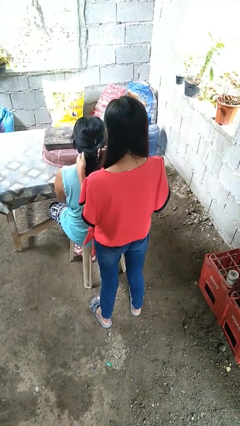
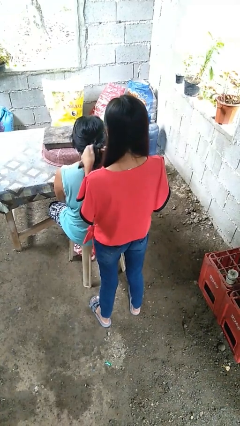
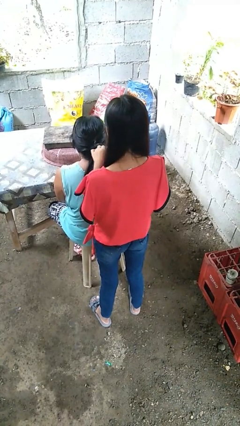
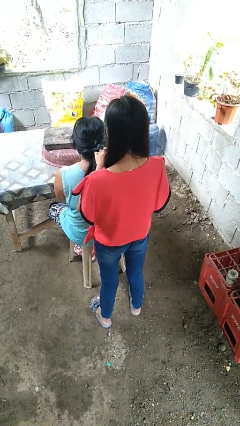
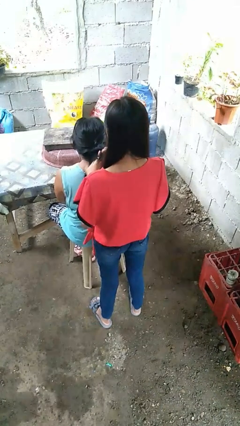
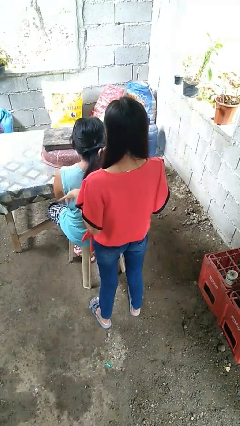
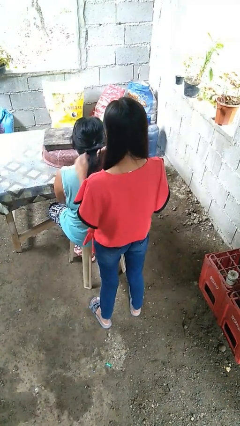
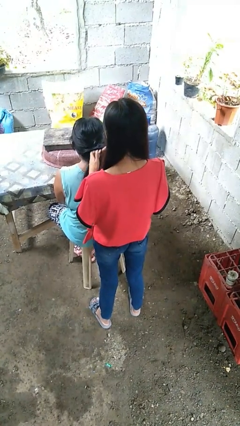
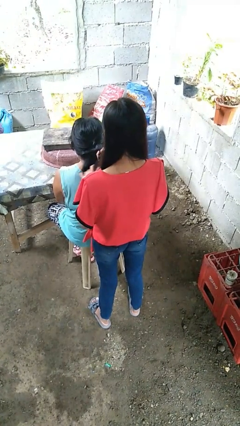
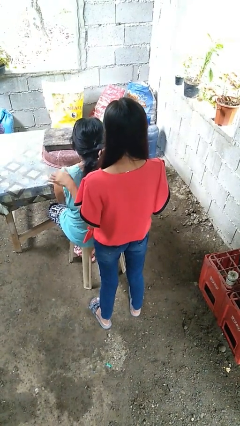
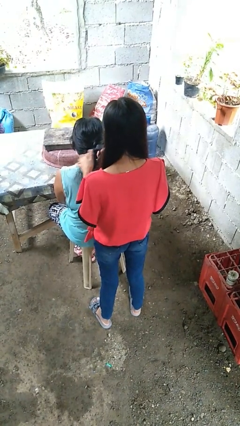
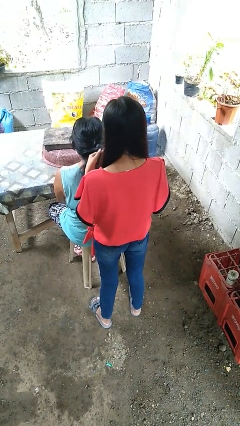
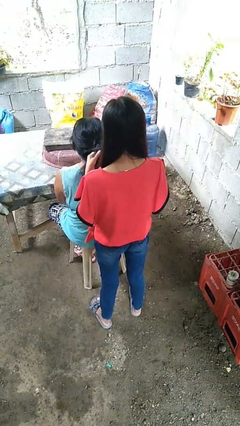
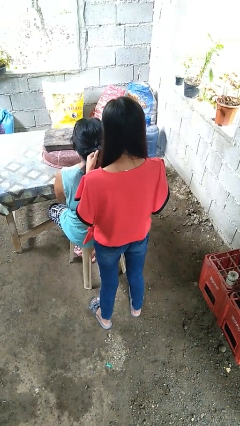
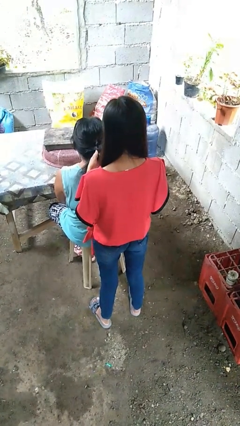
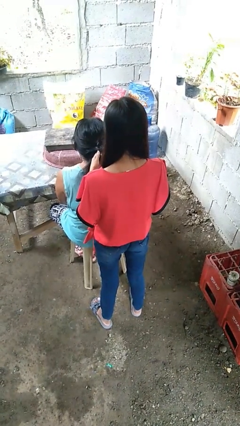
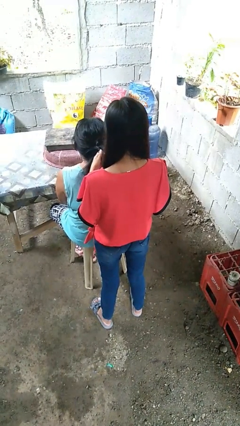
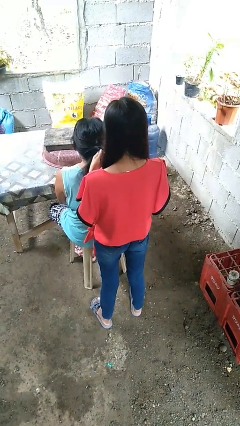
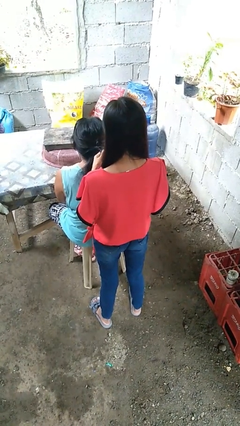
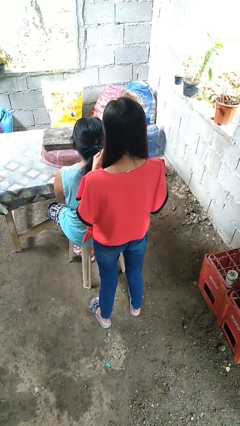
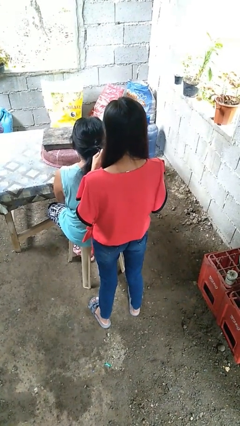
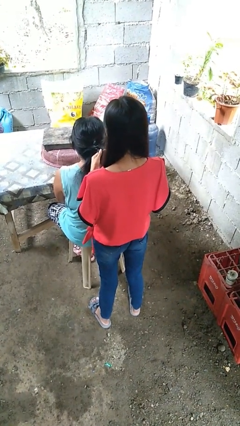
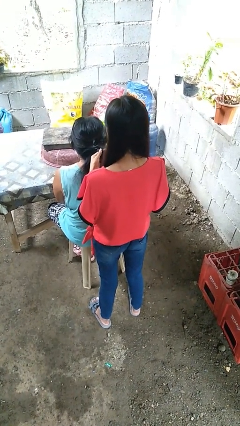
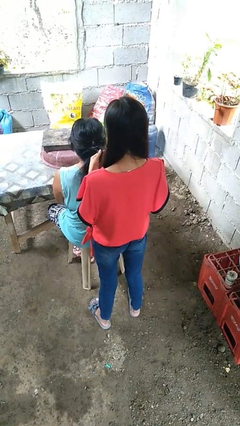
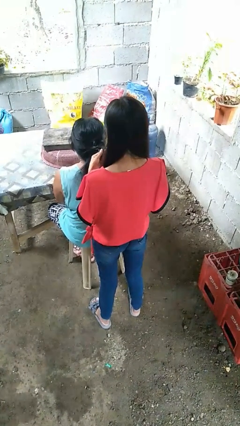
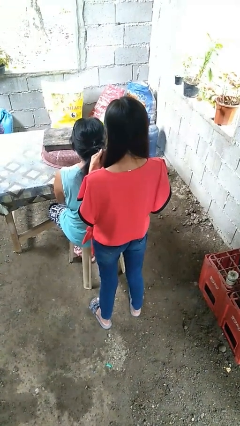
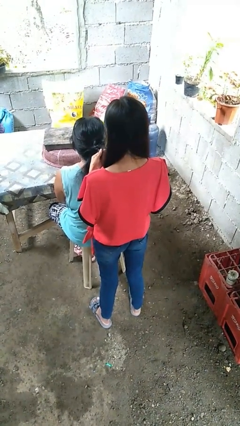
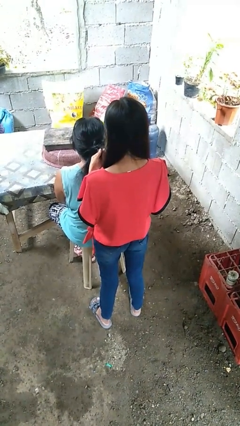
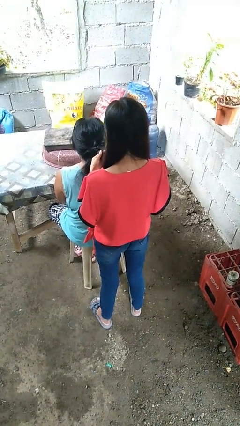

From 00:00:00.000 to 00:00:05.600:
person braids hair of person

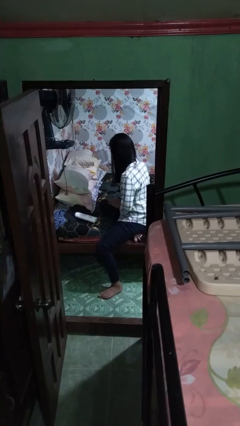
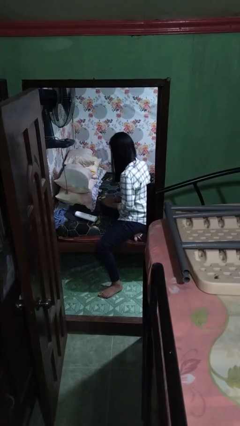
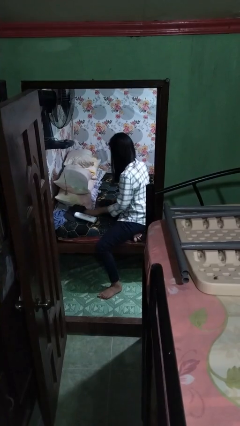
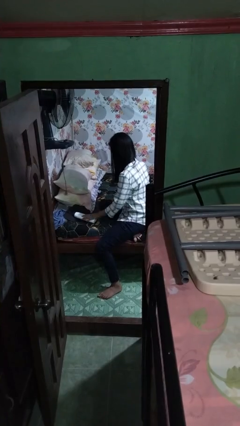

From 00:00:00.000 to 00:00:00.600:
person picks up object from bed

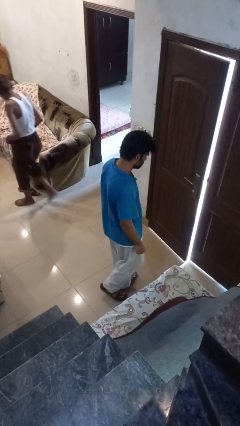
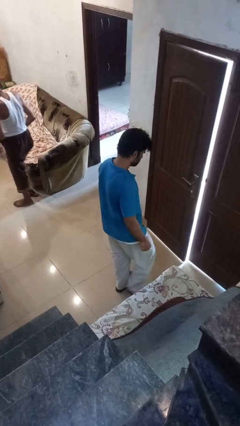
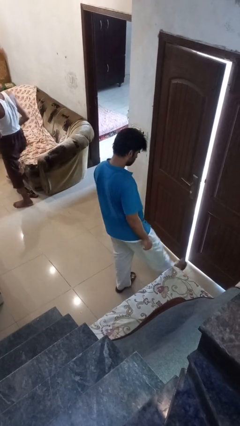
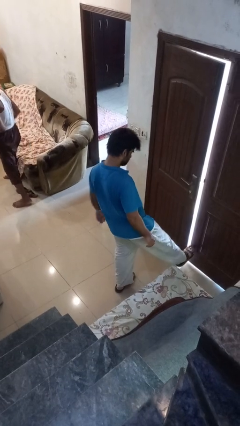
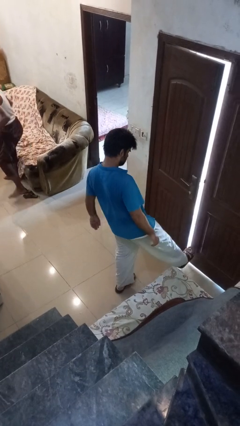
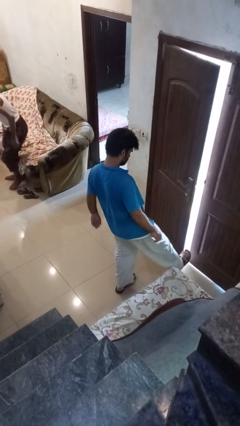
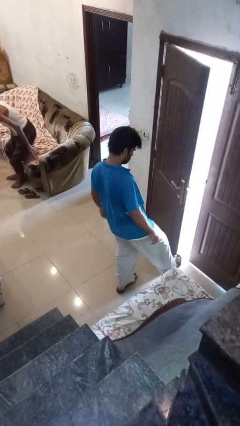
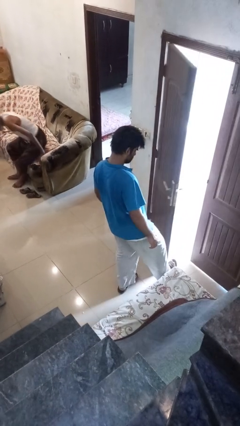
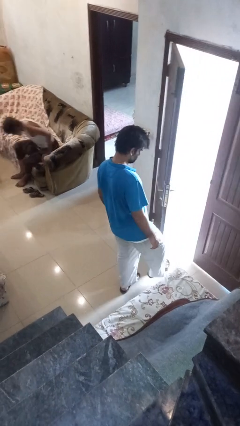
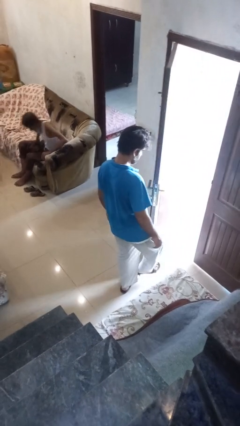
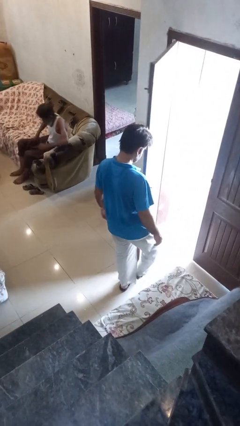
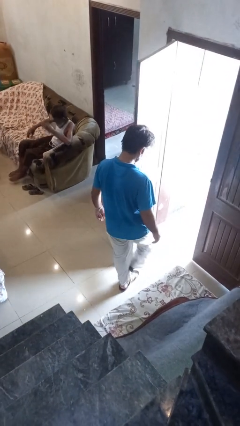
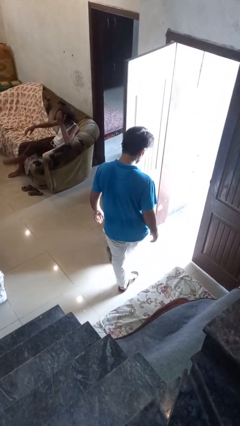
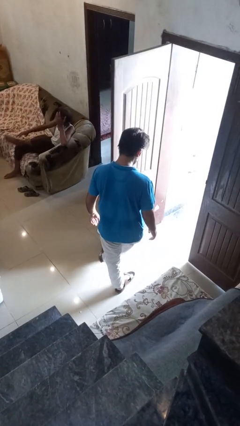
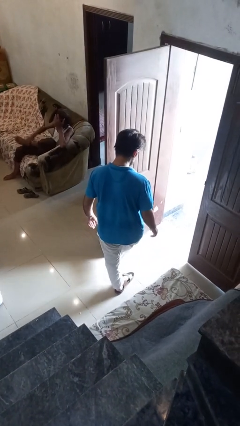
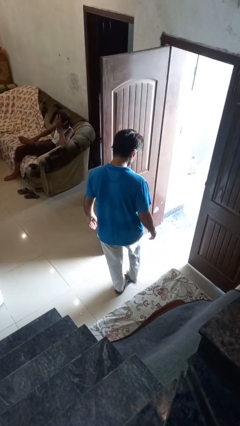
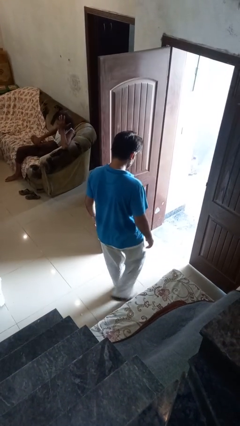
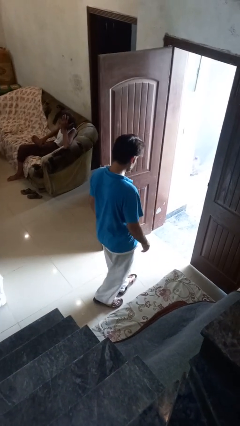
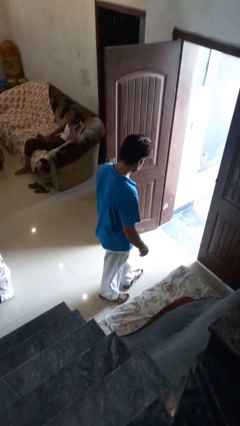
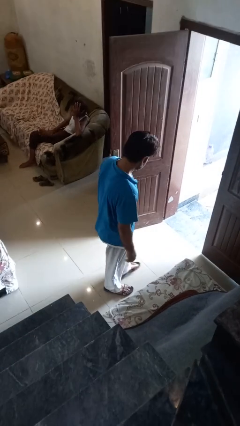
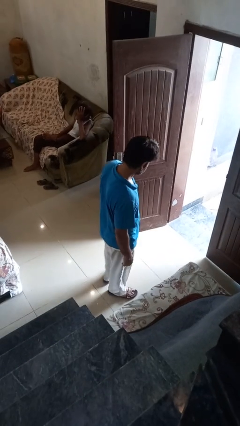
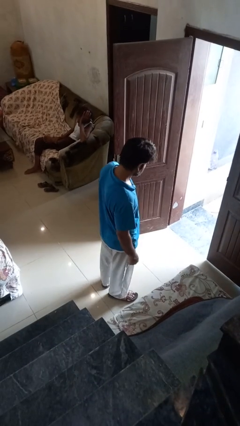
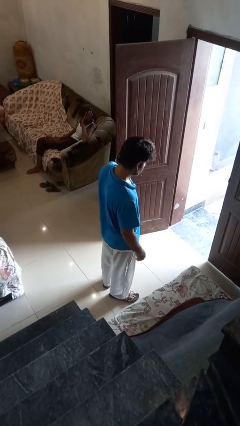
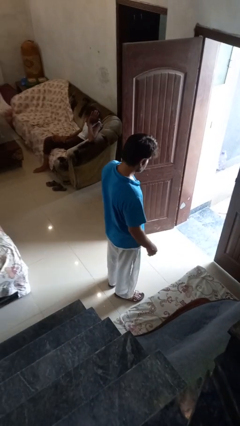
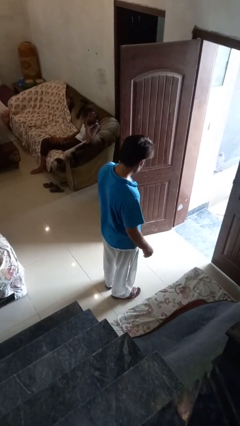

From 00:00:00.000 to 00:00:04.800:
person opens facility door

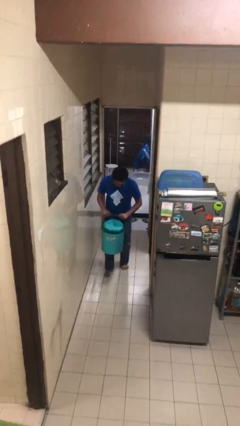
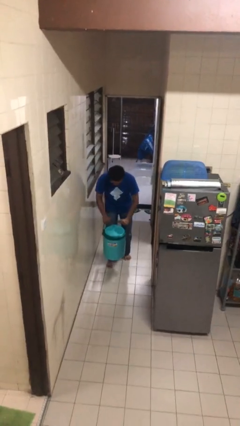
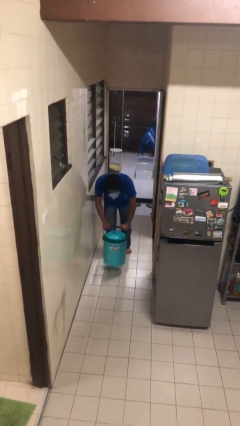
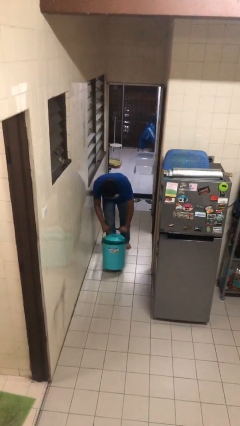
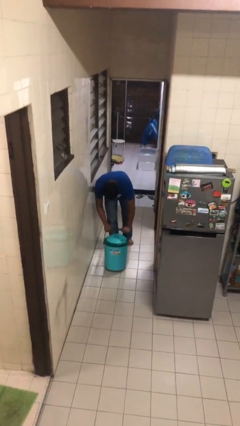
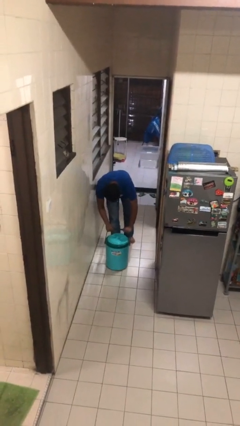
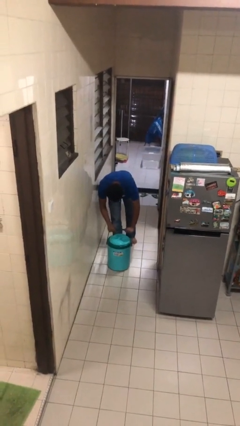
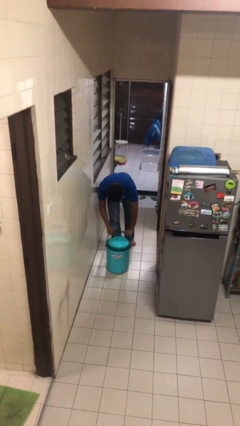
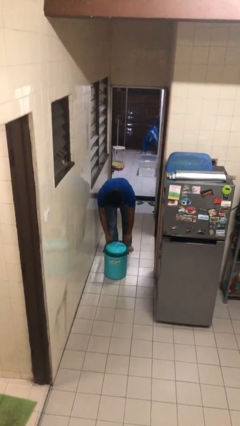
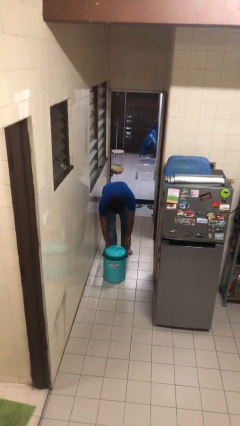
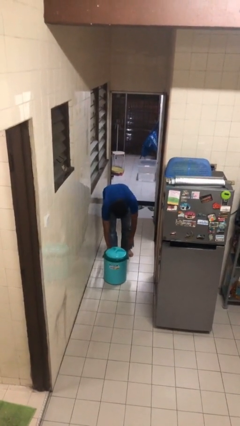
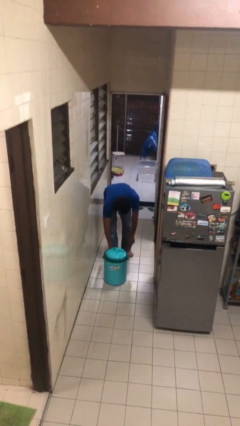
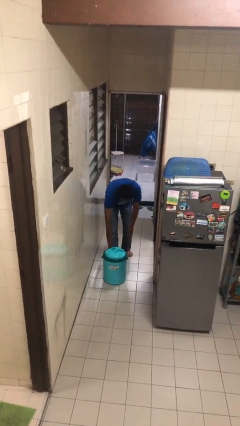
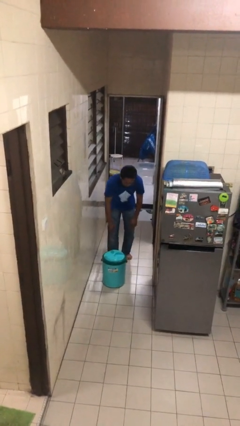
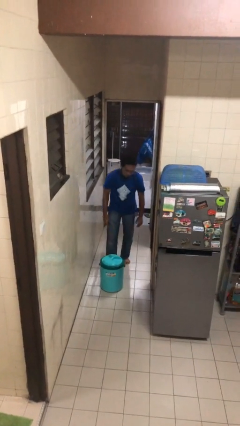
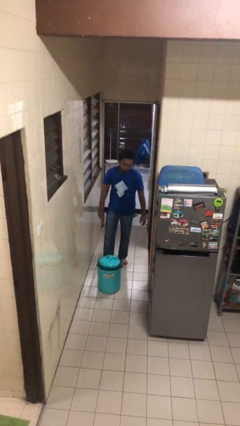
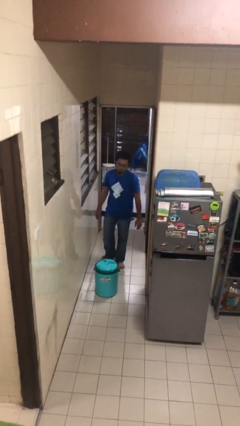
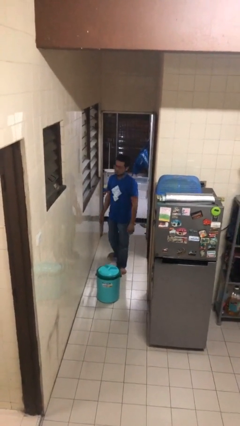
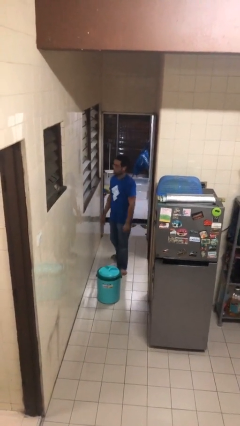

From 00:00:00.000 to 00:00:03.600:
person puts down object on floor

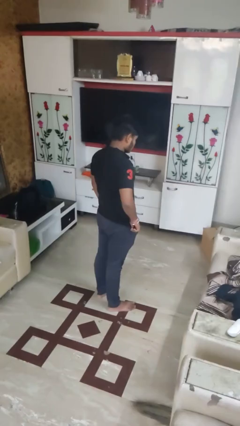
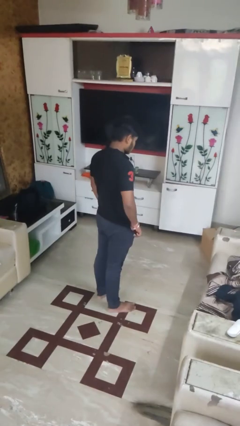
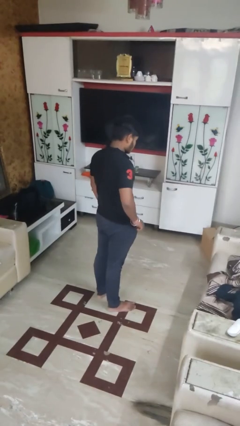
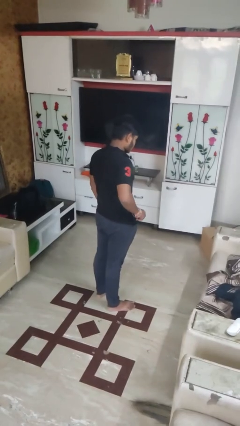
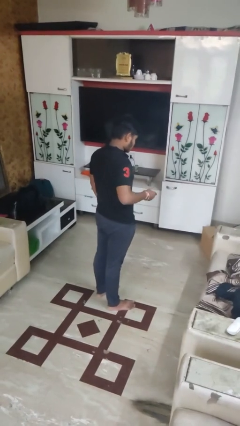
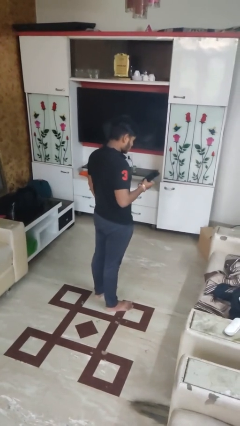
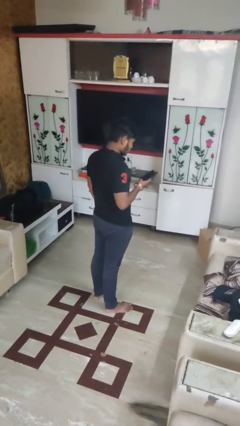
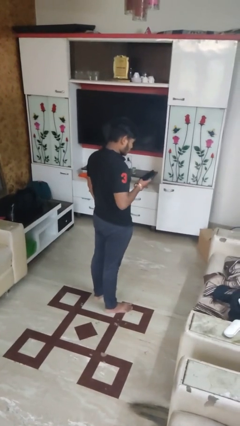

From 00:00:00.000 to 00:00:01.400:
person takes phone from pocket

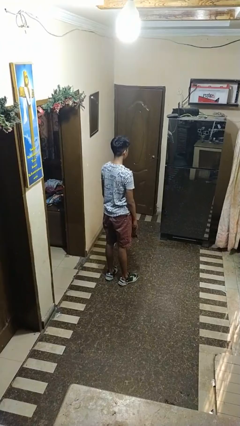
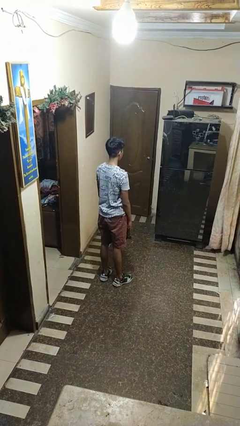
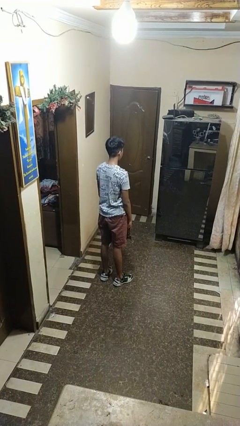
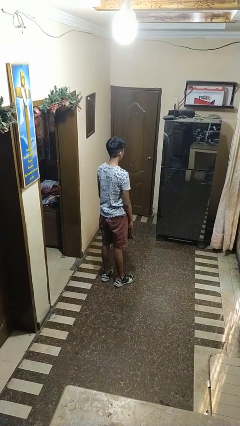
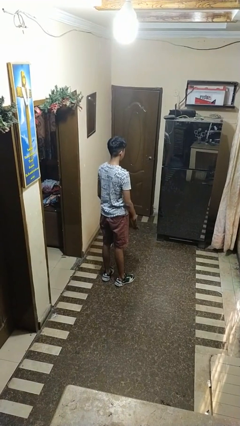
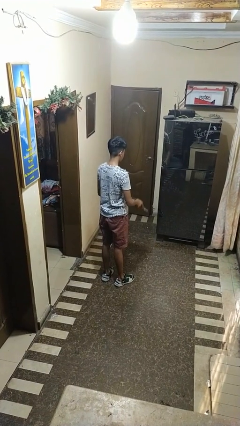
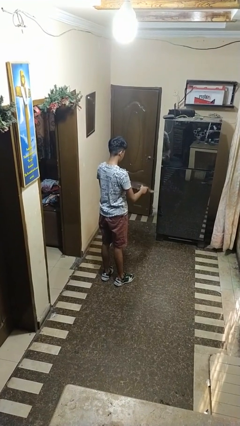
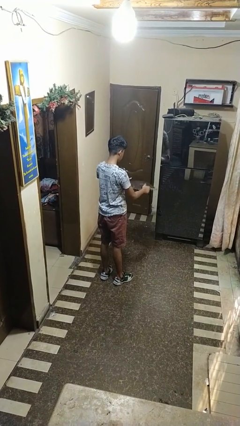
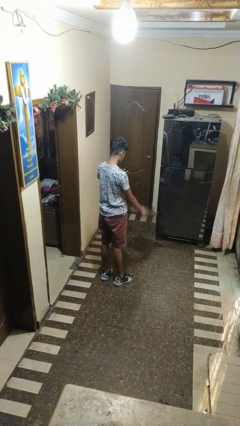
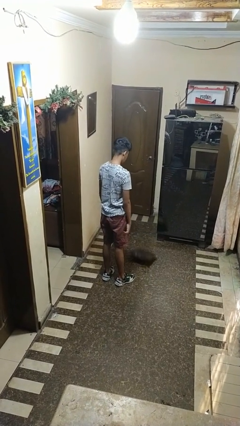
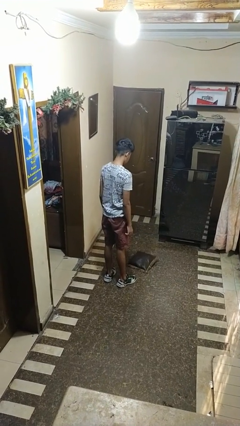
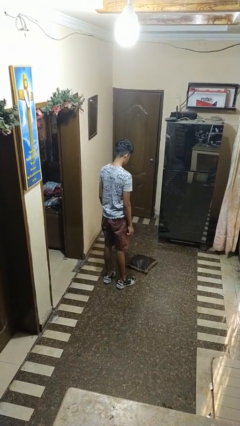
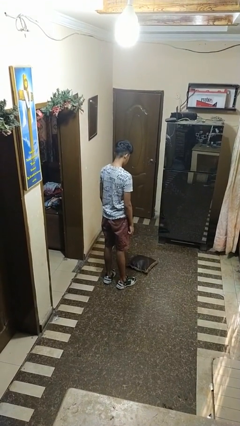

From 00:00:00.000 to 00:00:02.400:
person throws object to ground
